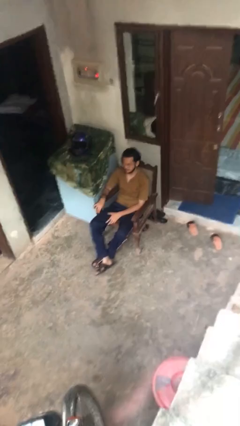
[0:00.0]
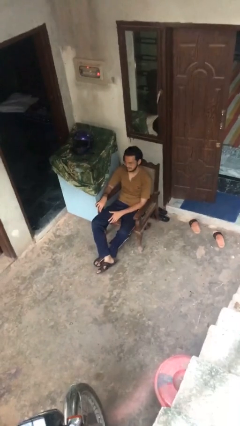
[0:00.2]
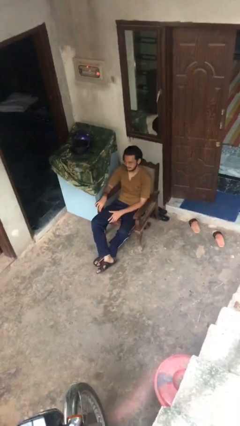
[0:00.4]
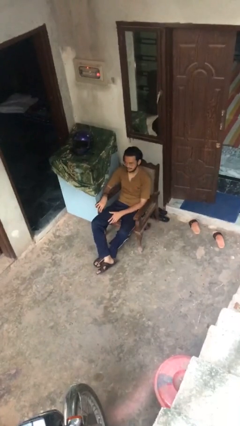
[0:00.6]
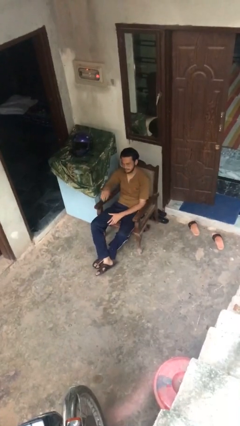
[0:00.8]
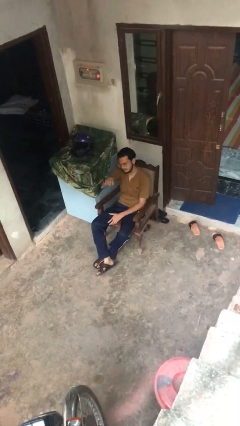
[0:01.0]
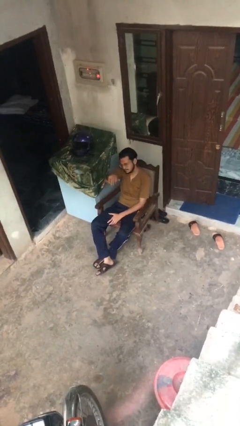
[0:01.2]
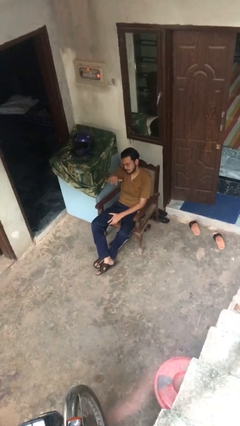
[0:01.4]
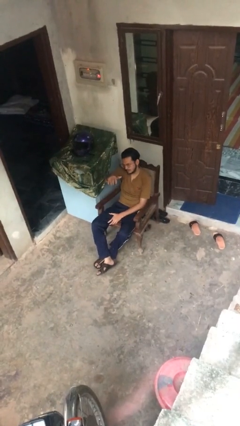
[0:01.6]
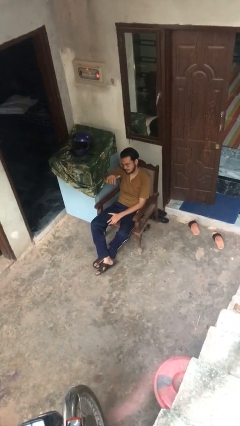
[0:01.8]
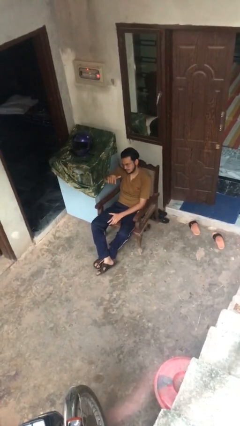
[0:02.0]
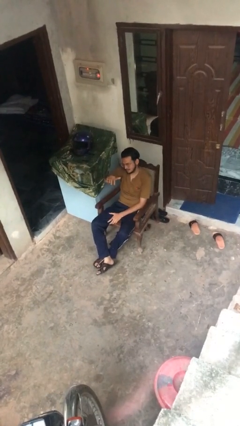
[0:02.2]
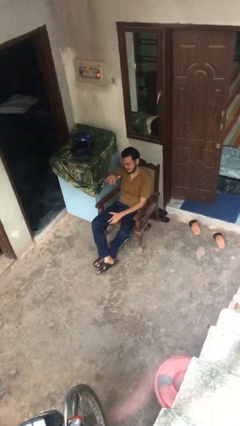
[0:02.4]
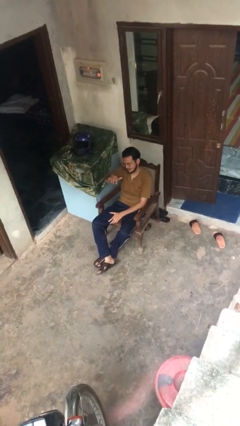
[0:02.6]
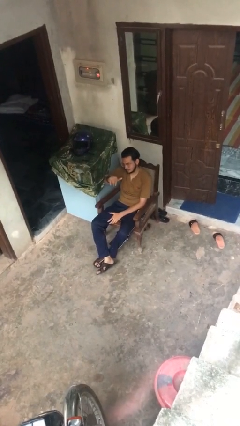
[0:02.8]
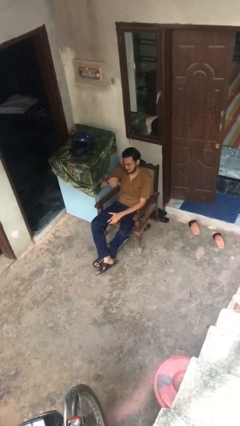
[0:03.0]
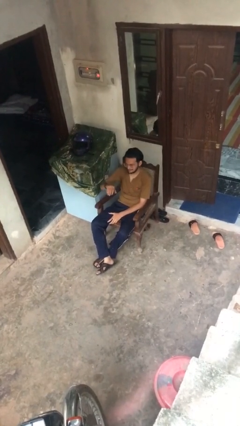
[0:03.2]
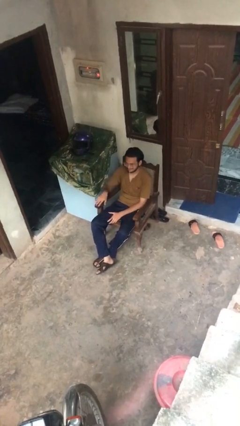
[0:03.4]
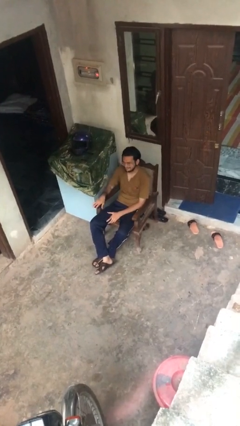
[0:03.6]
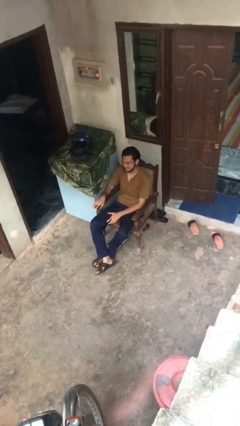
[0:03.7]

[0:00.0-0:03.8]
person gestures come here

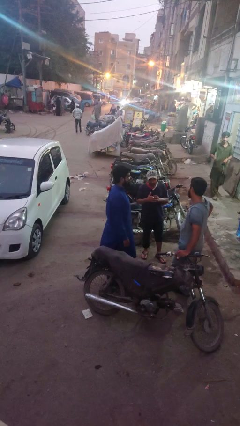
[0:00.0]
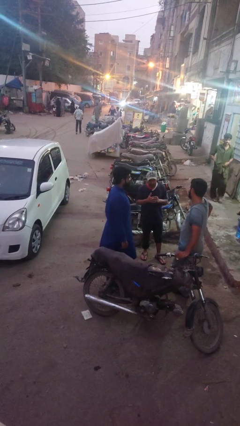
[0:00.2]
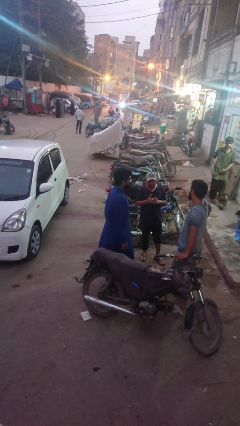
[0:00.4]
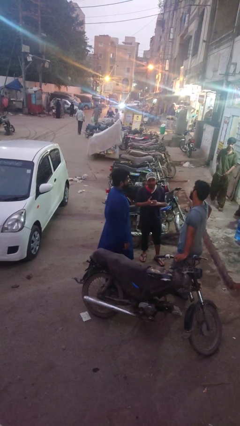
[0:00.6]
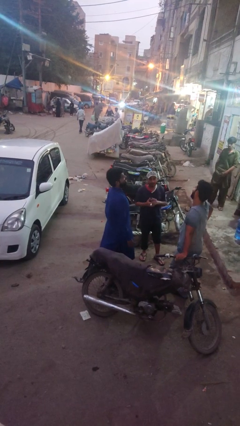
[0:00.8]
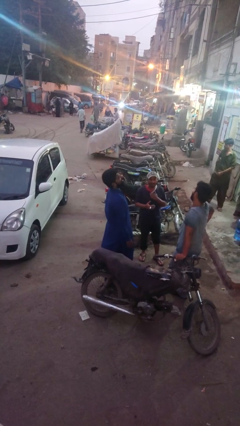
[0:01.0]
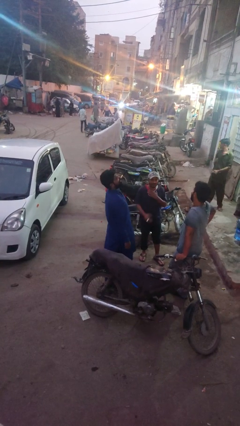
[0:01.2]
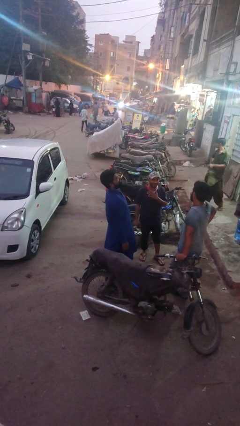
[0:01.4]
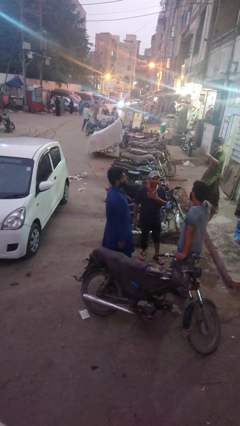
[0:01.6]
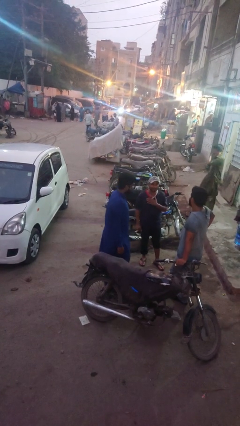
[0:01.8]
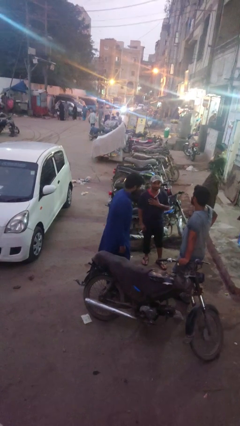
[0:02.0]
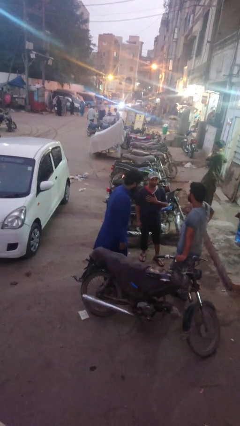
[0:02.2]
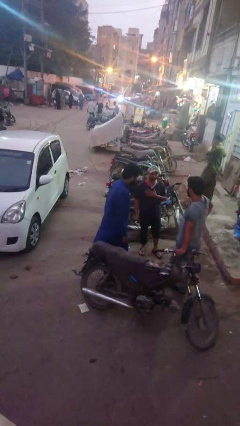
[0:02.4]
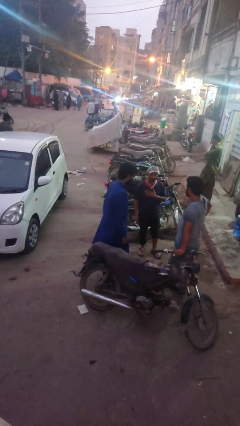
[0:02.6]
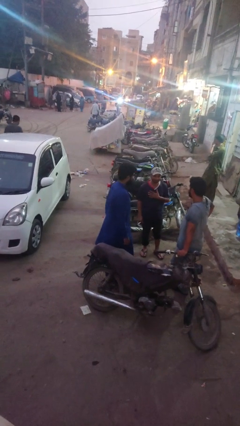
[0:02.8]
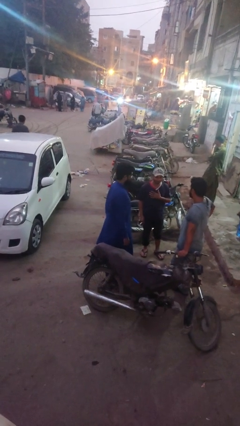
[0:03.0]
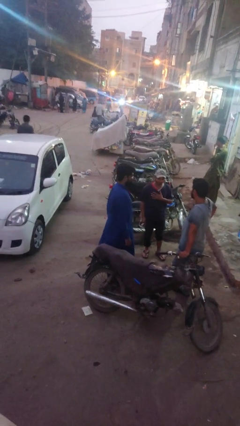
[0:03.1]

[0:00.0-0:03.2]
person laughs with person

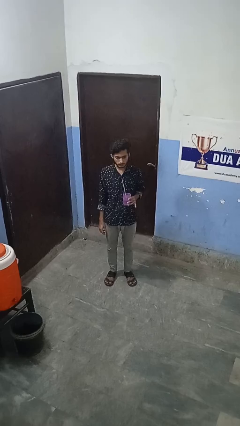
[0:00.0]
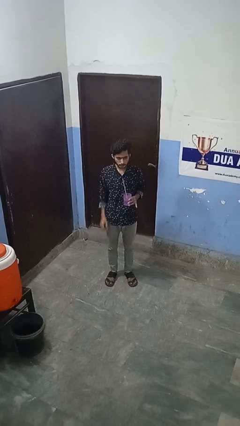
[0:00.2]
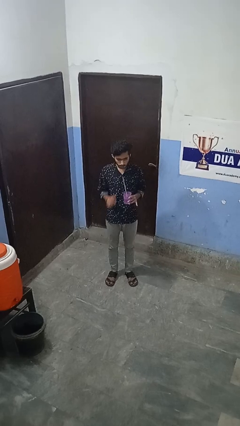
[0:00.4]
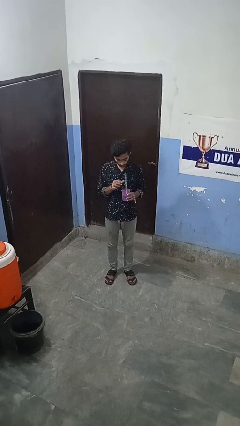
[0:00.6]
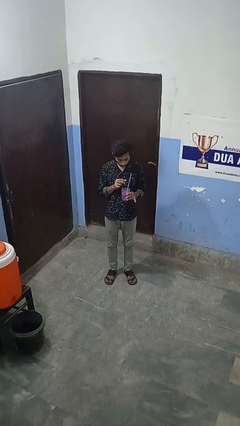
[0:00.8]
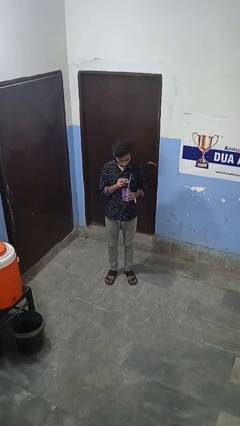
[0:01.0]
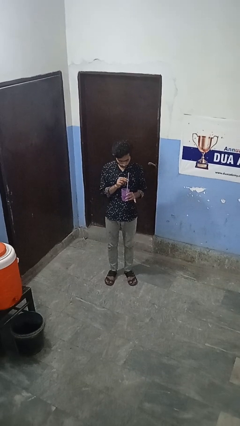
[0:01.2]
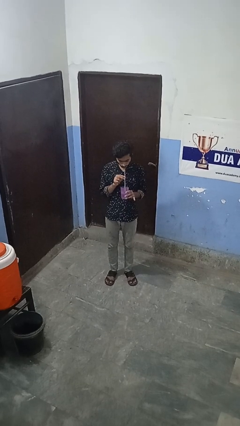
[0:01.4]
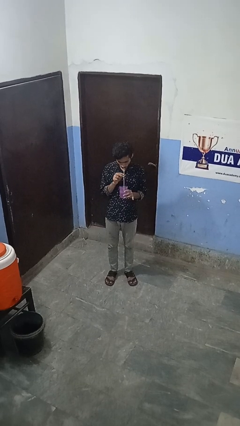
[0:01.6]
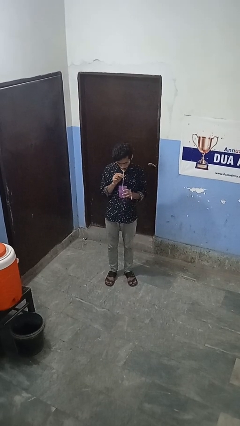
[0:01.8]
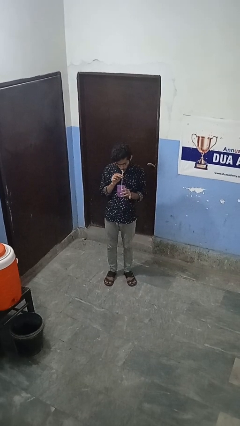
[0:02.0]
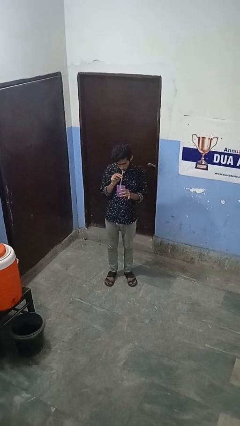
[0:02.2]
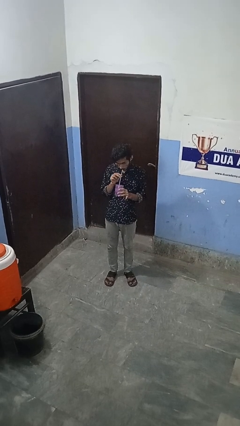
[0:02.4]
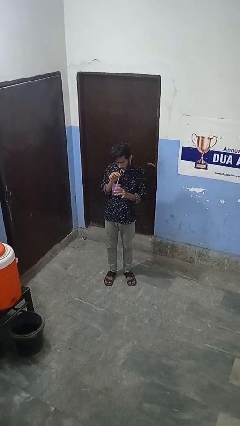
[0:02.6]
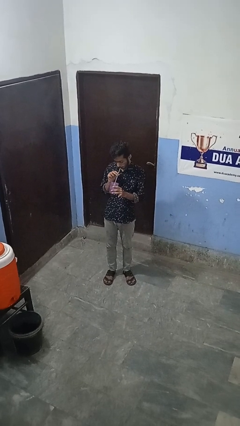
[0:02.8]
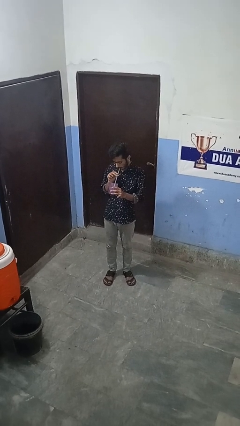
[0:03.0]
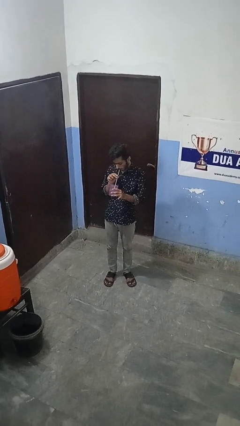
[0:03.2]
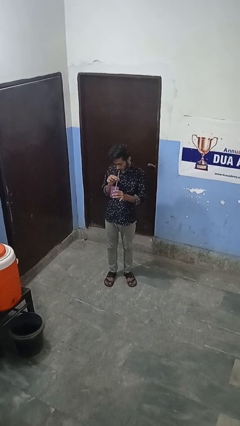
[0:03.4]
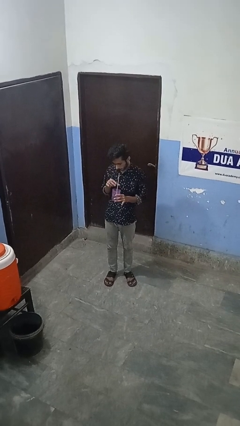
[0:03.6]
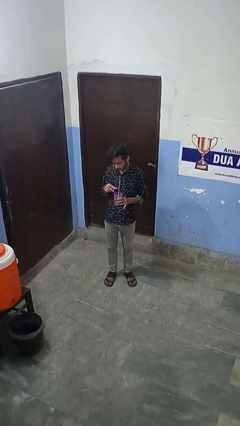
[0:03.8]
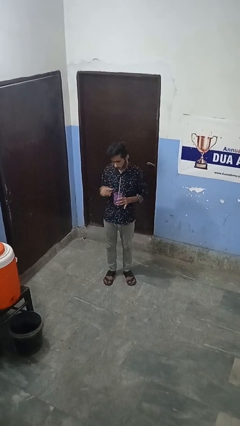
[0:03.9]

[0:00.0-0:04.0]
person drinks from straw

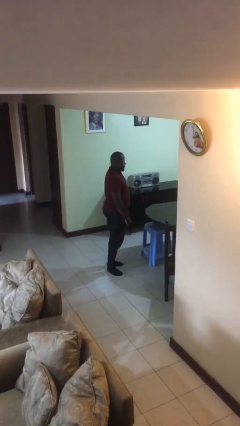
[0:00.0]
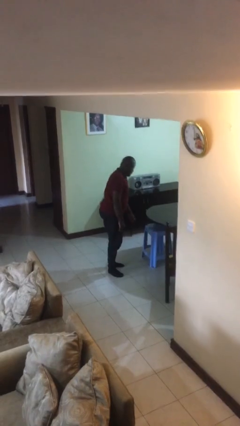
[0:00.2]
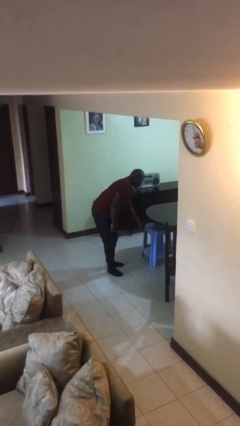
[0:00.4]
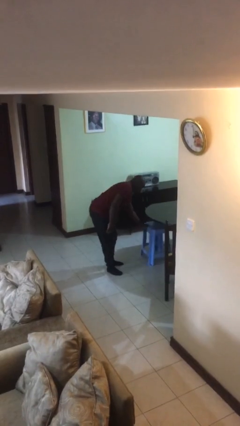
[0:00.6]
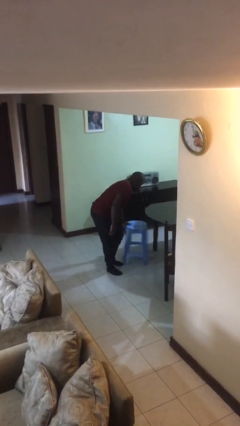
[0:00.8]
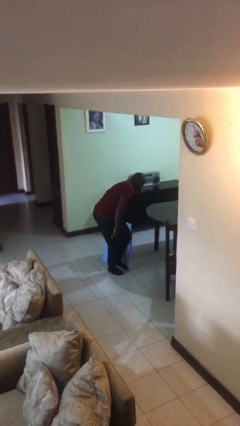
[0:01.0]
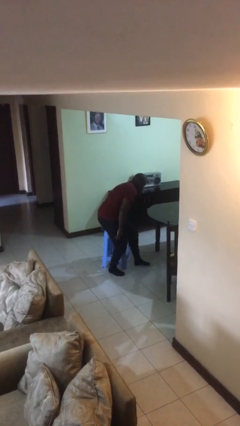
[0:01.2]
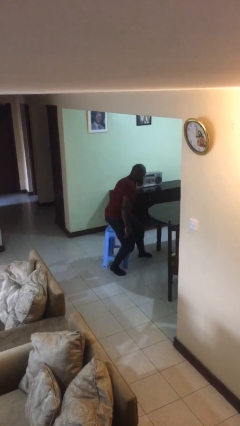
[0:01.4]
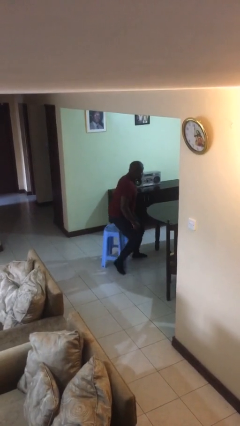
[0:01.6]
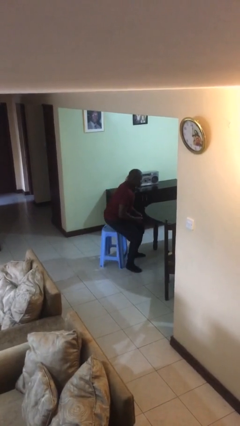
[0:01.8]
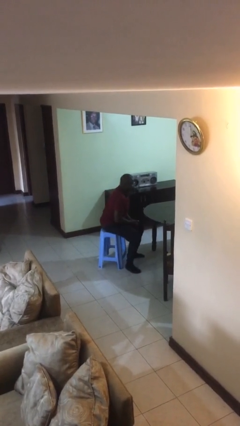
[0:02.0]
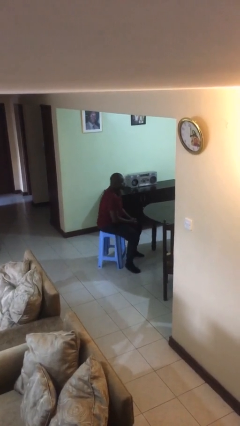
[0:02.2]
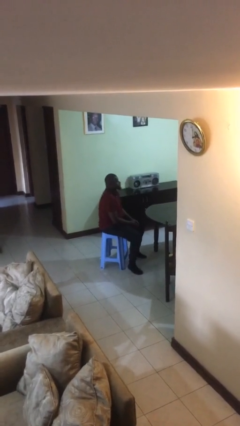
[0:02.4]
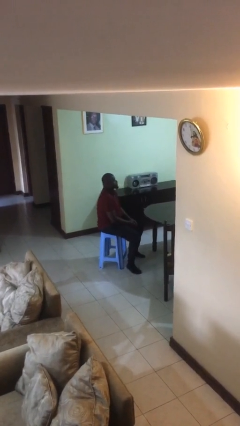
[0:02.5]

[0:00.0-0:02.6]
person sits down

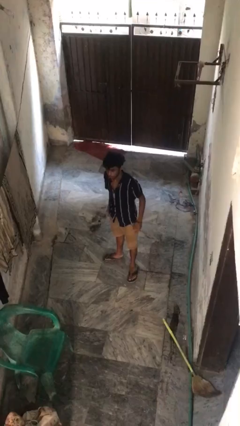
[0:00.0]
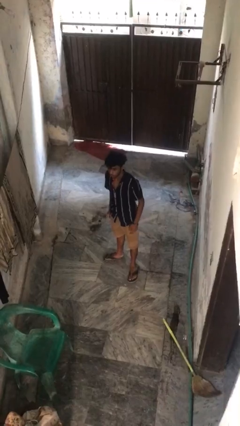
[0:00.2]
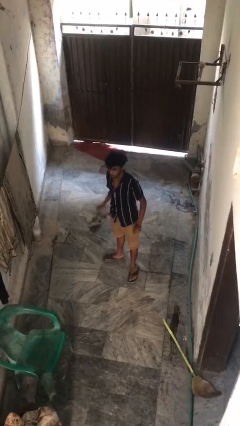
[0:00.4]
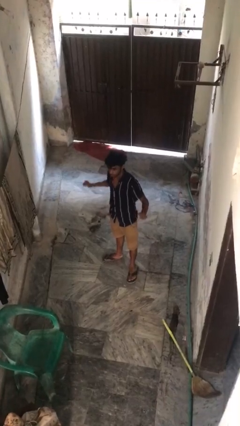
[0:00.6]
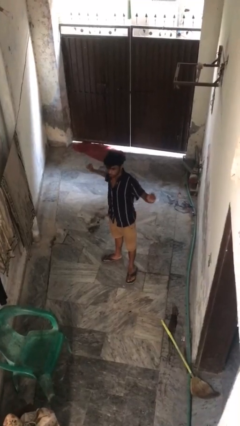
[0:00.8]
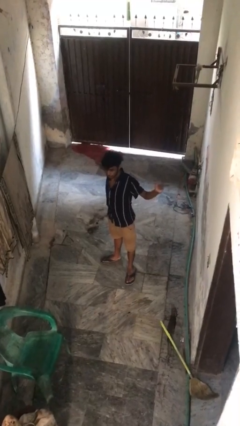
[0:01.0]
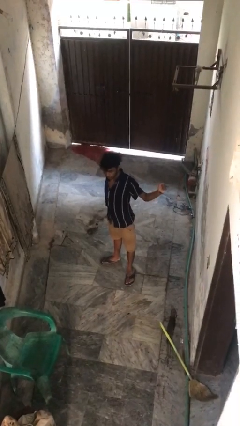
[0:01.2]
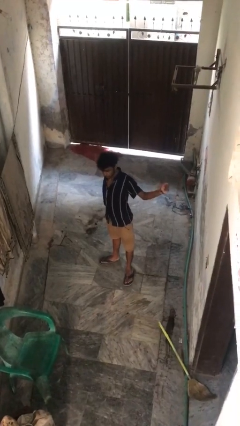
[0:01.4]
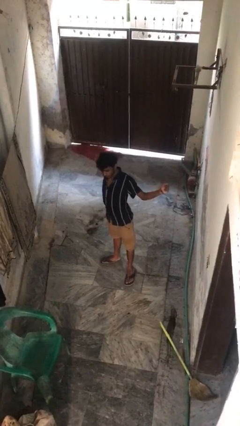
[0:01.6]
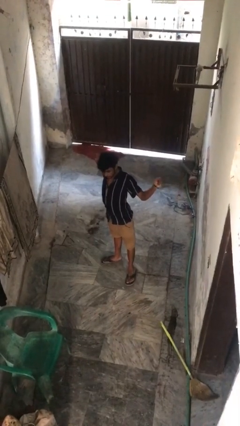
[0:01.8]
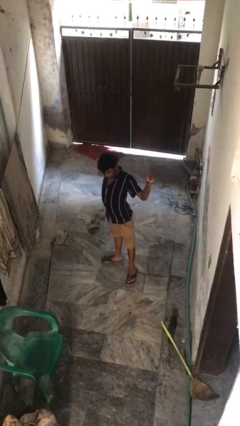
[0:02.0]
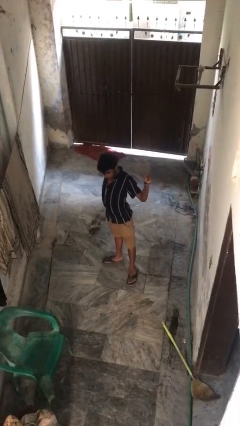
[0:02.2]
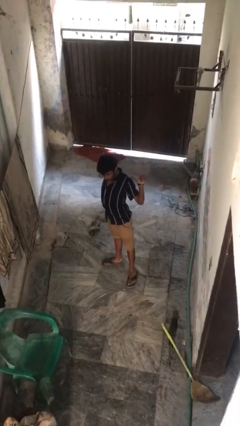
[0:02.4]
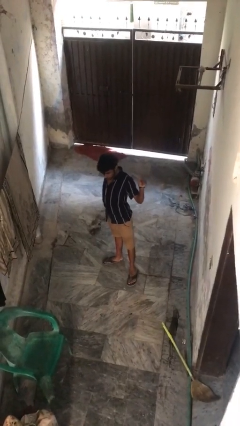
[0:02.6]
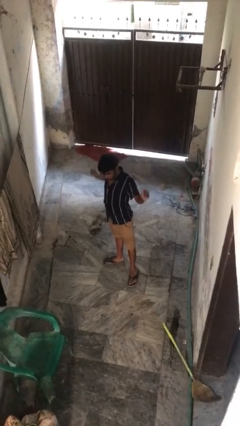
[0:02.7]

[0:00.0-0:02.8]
person stretches arms to side

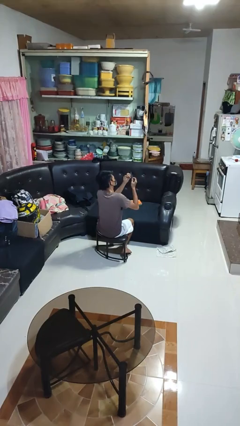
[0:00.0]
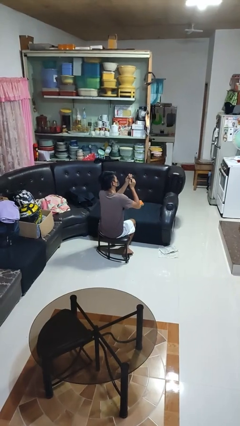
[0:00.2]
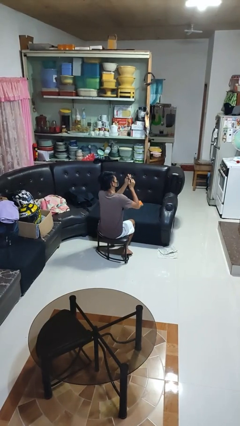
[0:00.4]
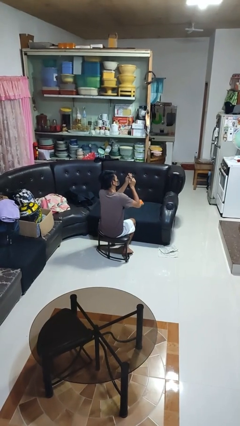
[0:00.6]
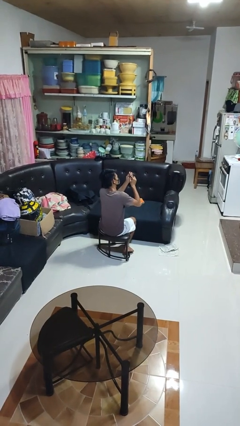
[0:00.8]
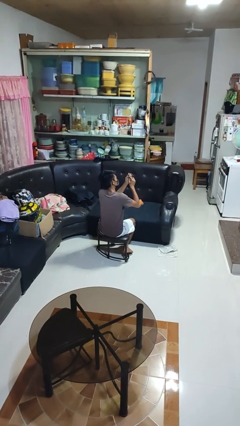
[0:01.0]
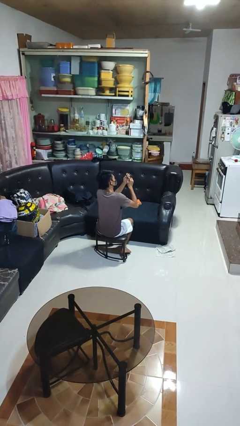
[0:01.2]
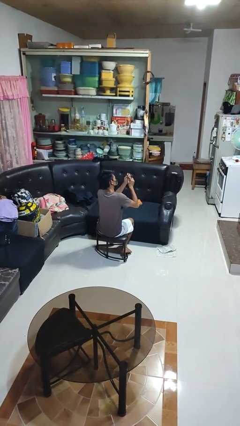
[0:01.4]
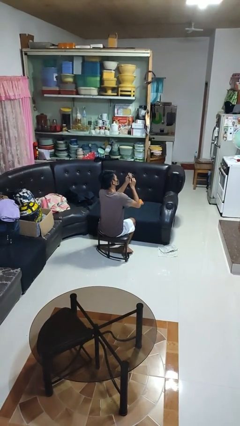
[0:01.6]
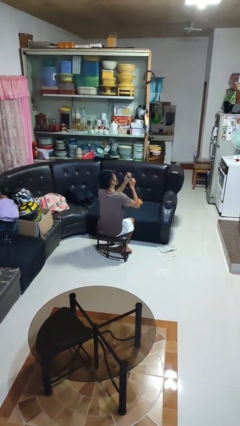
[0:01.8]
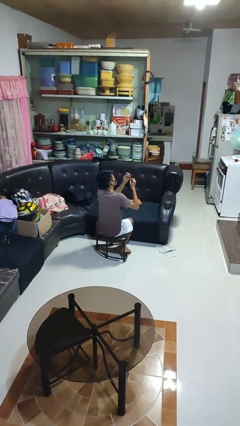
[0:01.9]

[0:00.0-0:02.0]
person files fingernails
